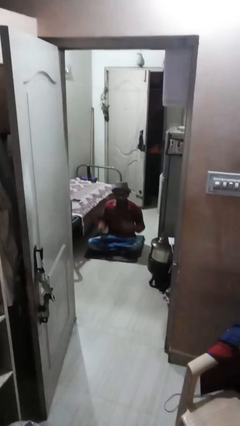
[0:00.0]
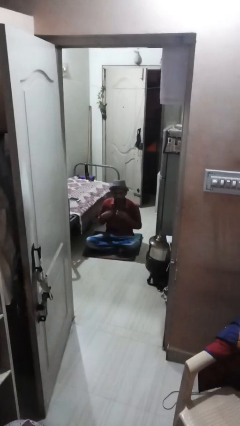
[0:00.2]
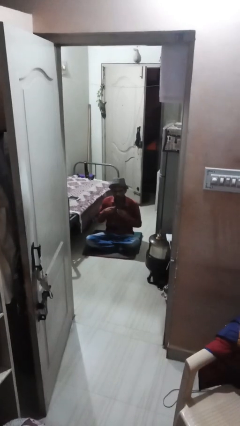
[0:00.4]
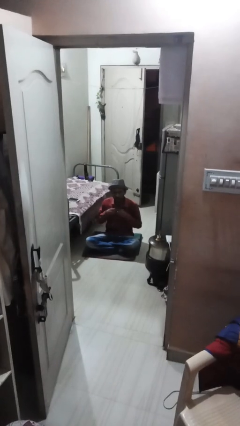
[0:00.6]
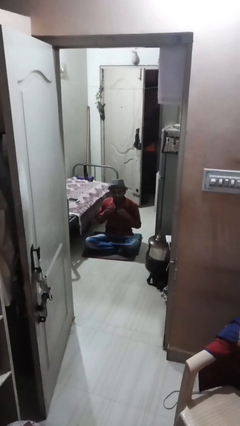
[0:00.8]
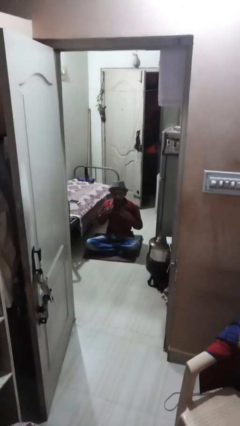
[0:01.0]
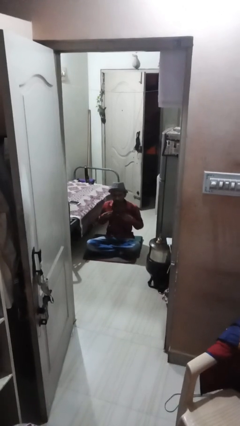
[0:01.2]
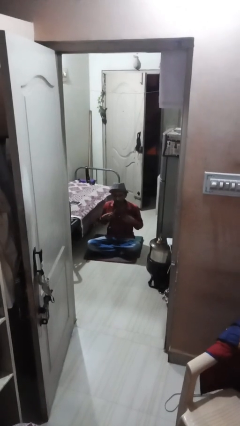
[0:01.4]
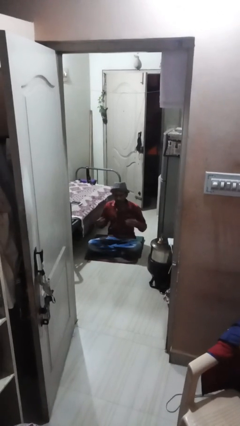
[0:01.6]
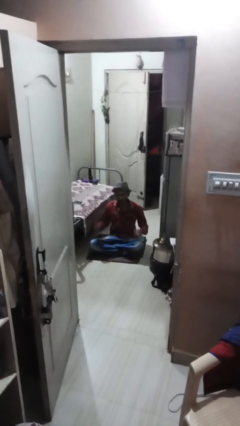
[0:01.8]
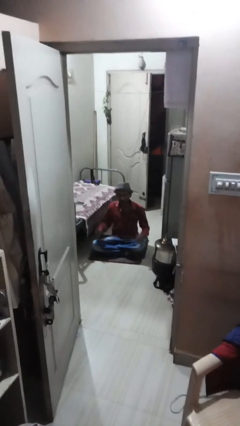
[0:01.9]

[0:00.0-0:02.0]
person unbuttons shirt

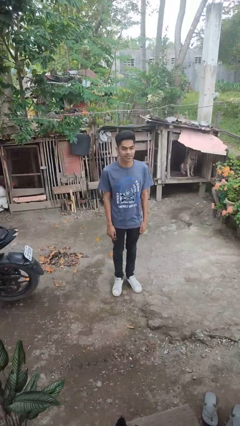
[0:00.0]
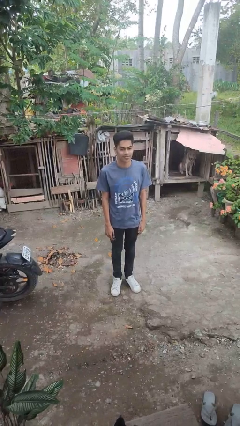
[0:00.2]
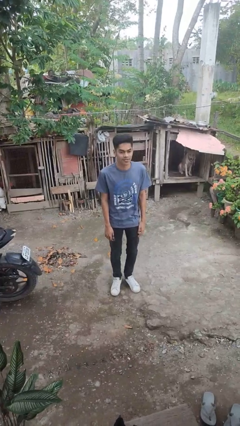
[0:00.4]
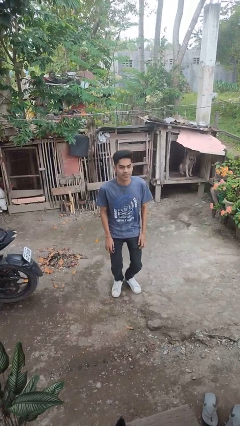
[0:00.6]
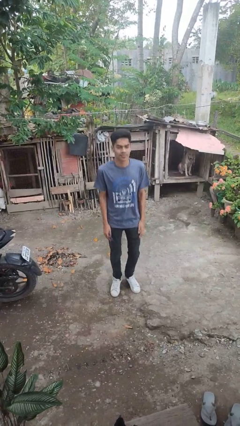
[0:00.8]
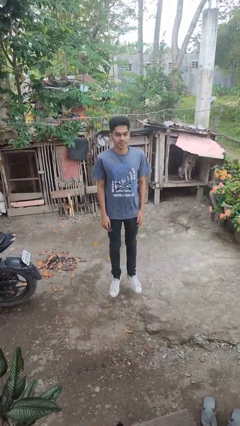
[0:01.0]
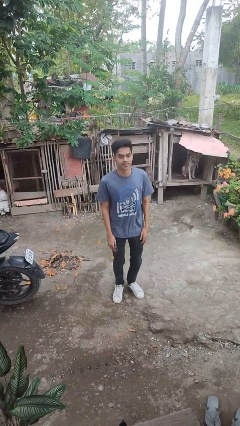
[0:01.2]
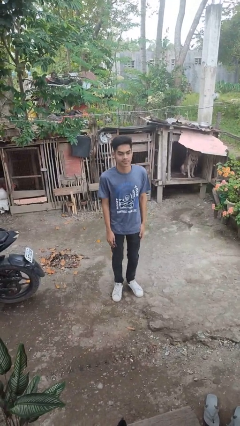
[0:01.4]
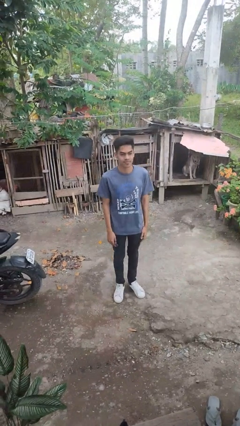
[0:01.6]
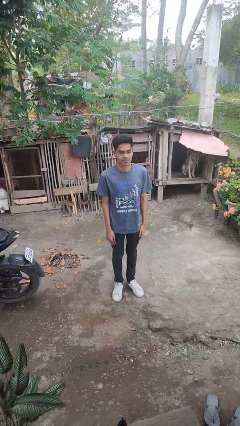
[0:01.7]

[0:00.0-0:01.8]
person jumps

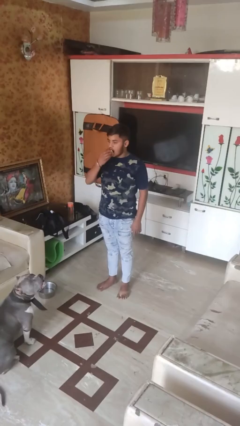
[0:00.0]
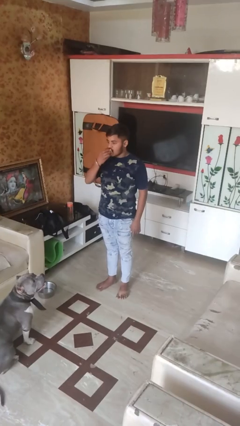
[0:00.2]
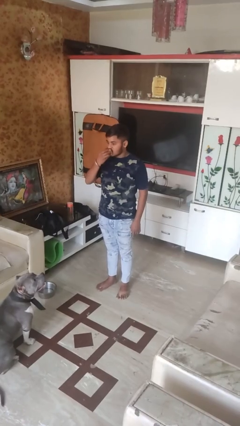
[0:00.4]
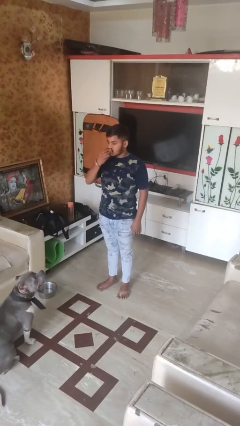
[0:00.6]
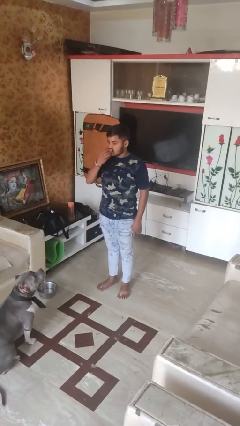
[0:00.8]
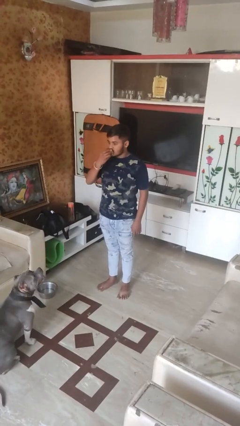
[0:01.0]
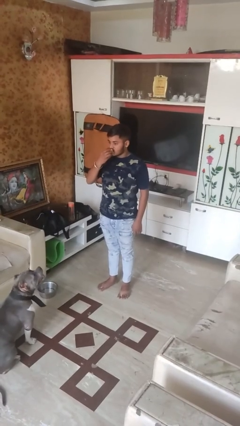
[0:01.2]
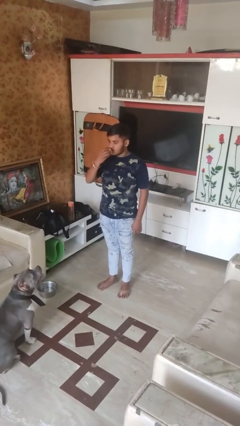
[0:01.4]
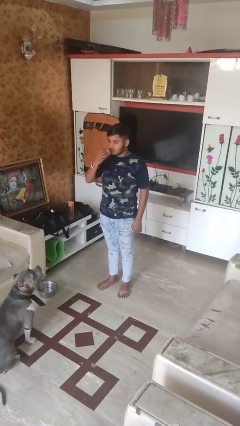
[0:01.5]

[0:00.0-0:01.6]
person eats apple

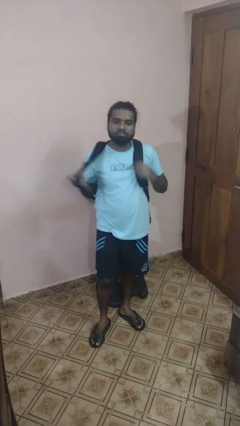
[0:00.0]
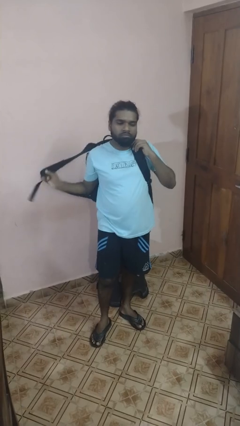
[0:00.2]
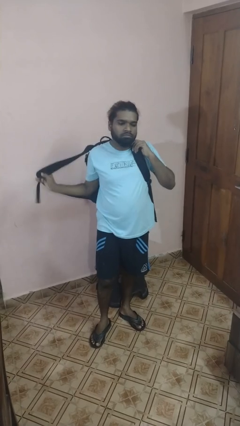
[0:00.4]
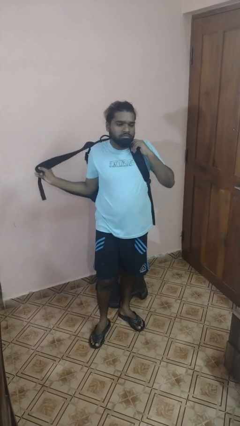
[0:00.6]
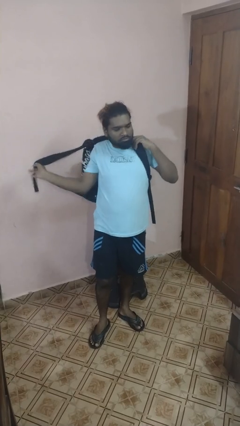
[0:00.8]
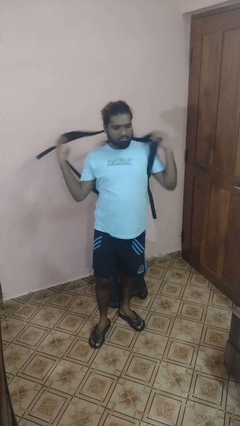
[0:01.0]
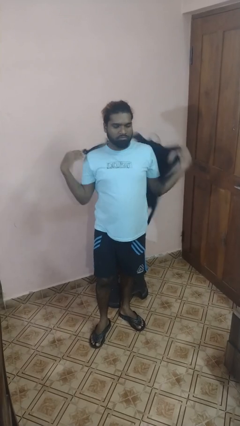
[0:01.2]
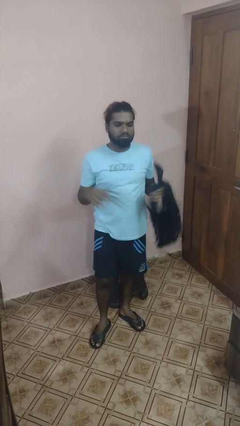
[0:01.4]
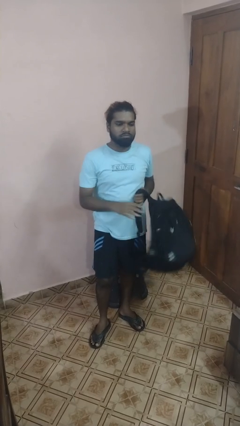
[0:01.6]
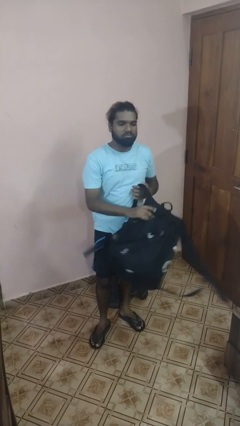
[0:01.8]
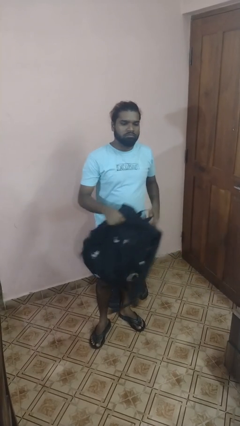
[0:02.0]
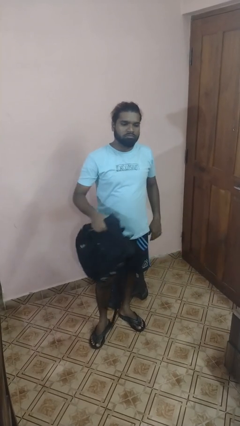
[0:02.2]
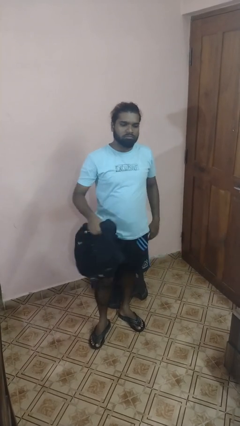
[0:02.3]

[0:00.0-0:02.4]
person takes off backpack

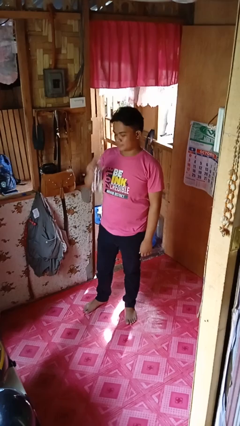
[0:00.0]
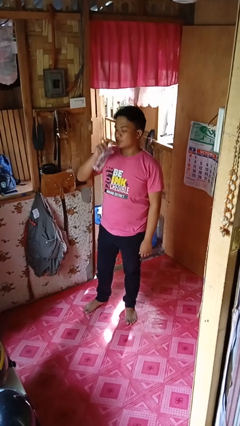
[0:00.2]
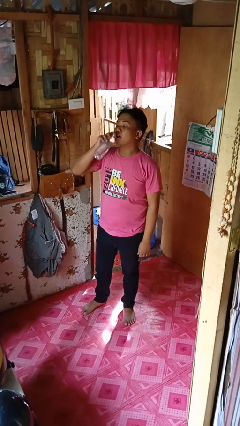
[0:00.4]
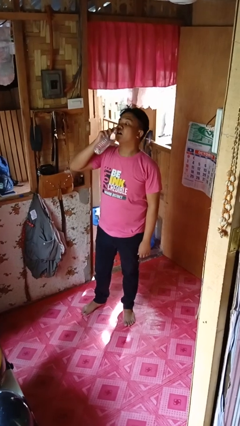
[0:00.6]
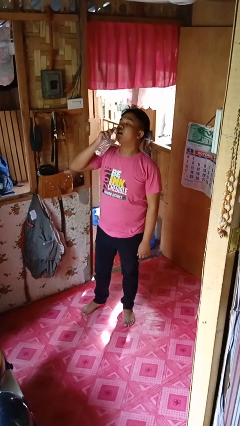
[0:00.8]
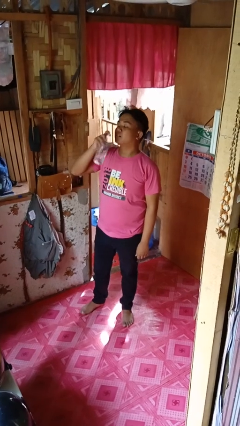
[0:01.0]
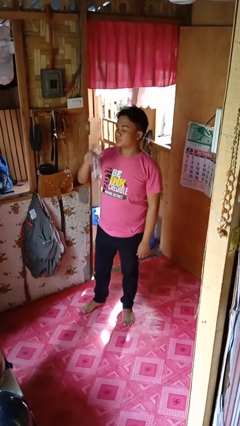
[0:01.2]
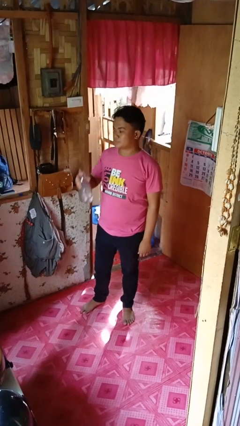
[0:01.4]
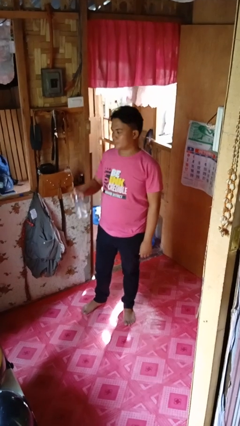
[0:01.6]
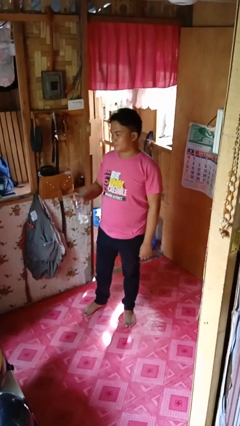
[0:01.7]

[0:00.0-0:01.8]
person drinks from bottle

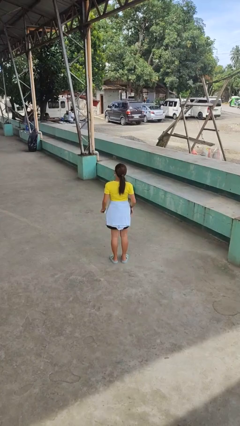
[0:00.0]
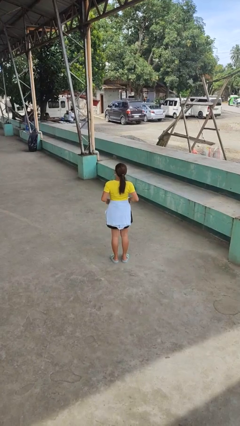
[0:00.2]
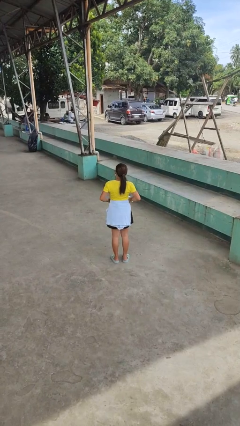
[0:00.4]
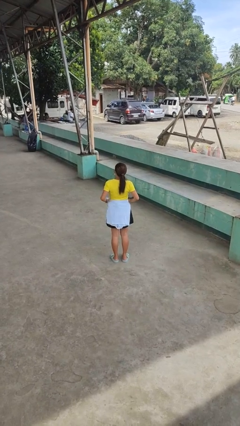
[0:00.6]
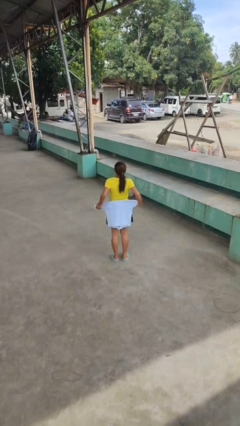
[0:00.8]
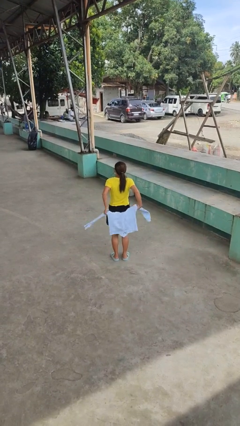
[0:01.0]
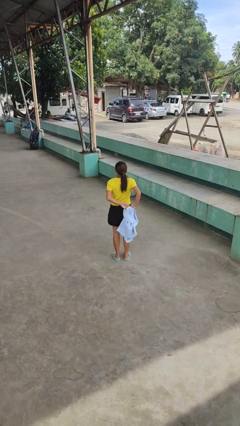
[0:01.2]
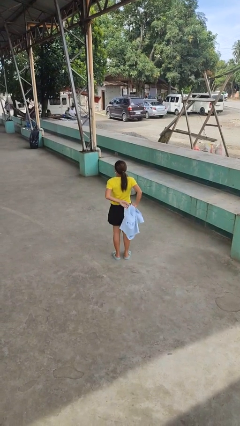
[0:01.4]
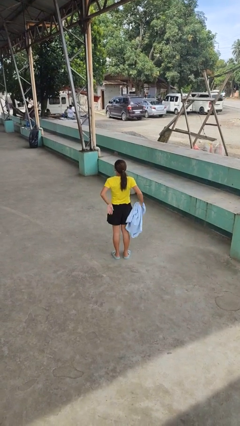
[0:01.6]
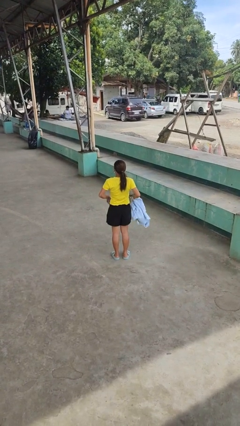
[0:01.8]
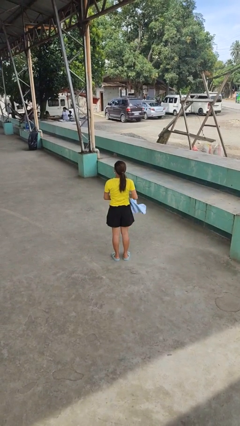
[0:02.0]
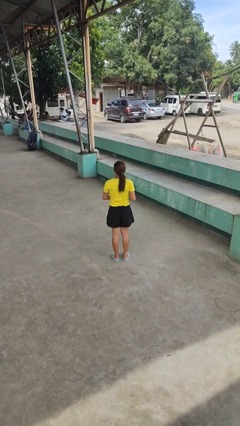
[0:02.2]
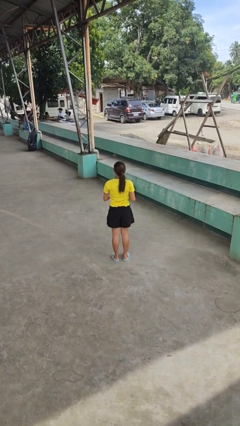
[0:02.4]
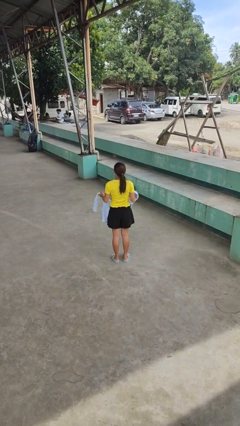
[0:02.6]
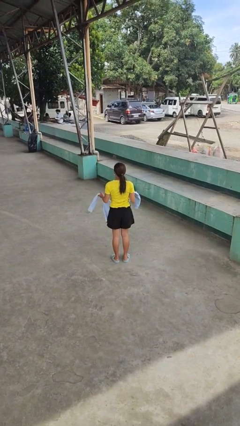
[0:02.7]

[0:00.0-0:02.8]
person unties jacket around waist

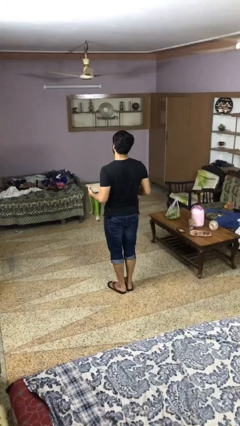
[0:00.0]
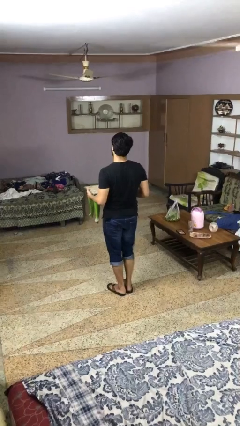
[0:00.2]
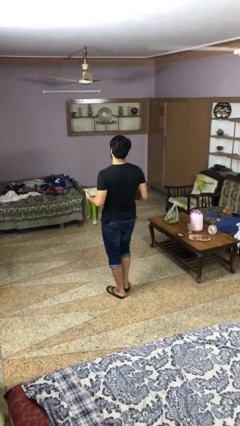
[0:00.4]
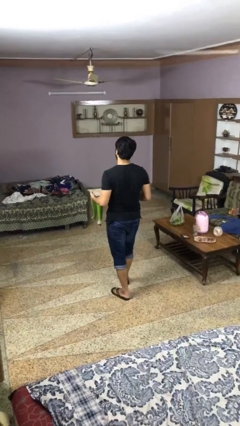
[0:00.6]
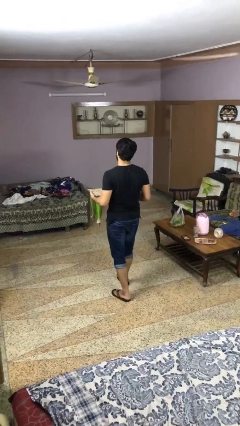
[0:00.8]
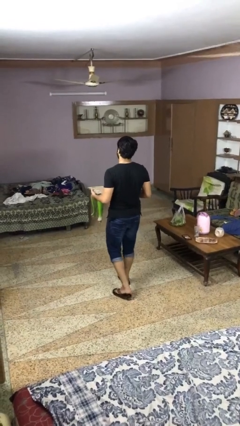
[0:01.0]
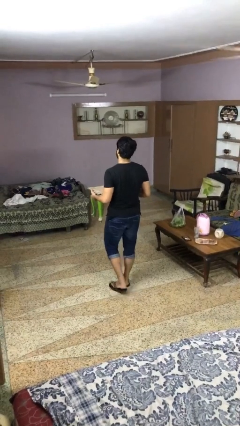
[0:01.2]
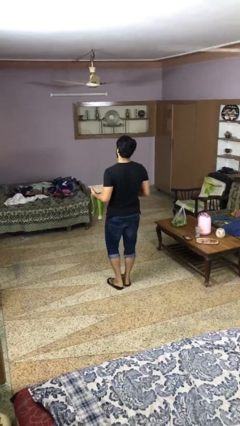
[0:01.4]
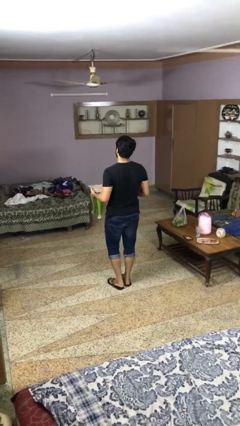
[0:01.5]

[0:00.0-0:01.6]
person carries furniture

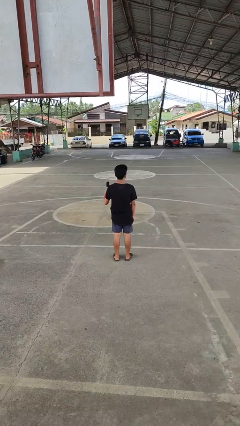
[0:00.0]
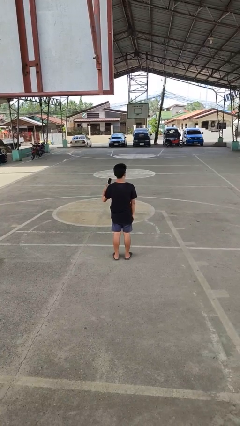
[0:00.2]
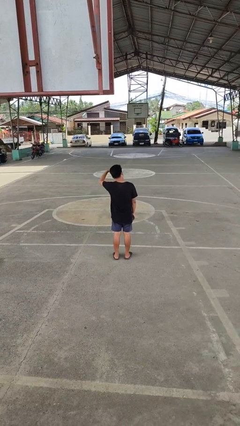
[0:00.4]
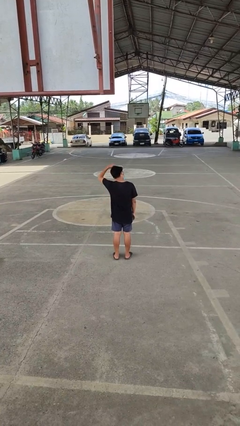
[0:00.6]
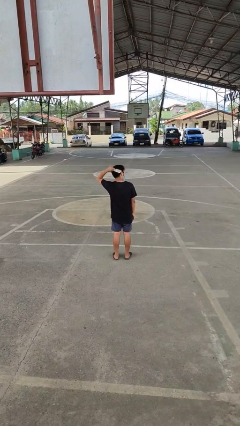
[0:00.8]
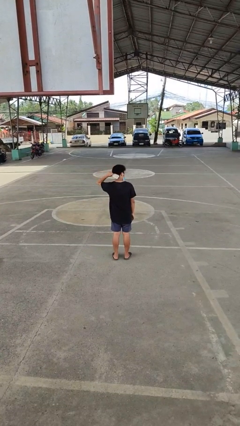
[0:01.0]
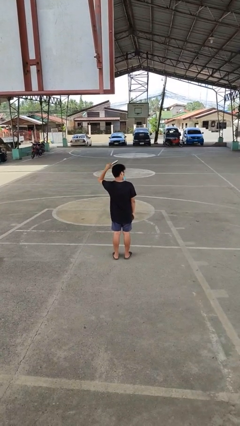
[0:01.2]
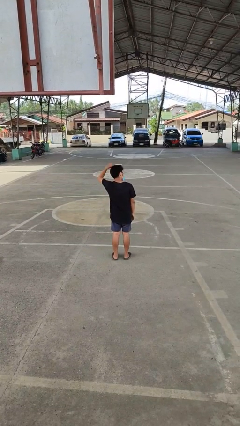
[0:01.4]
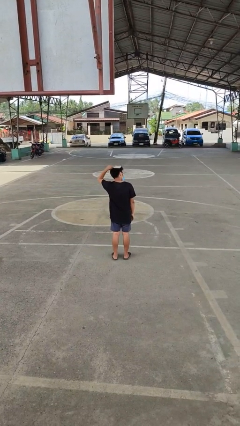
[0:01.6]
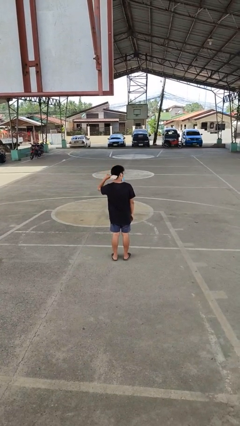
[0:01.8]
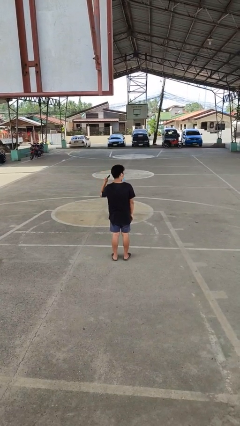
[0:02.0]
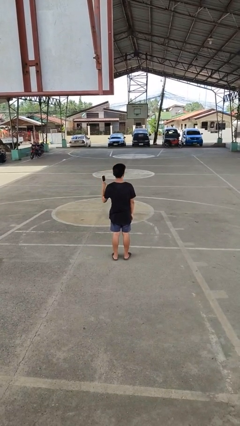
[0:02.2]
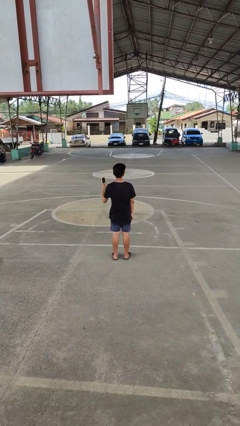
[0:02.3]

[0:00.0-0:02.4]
person brushes hair

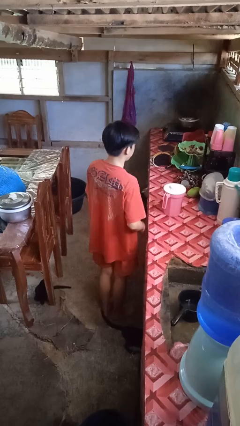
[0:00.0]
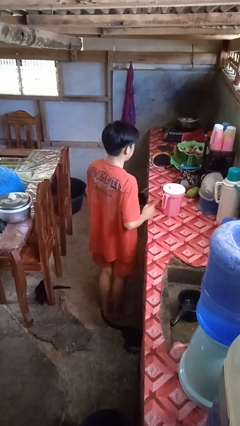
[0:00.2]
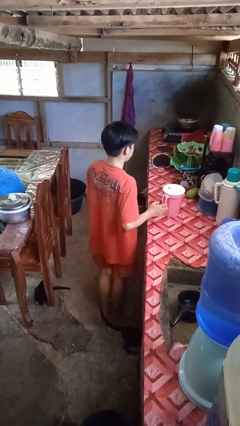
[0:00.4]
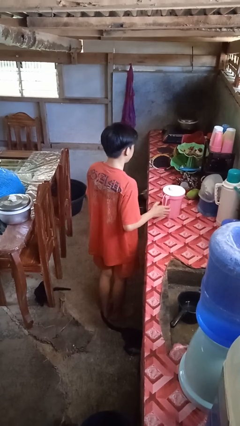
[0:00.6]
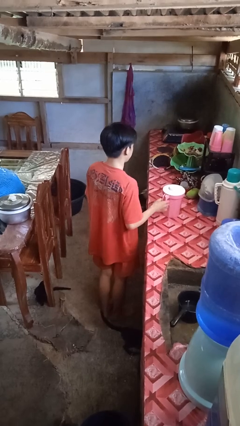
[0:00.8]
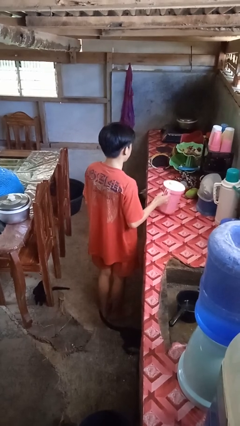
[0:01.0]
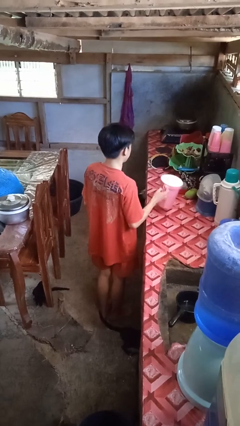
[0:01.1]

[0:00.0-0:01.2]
person picks up object from countertop
